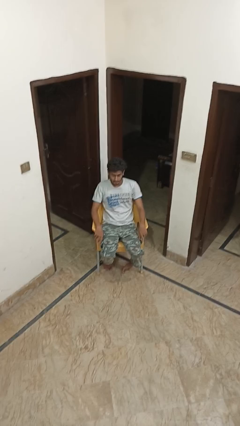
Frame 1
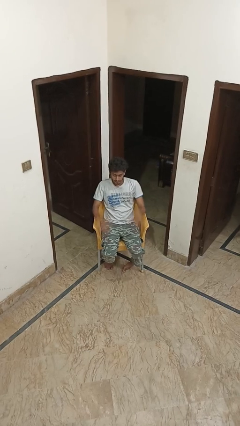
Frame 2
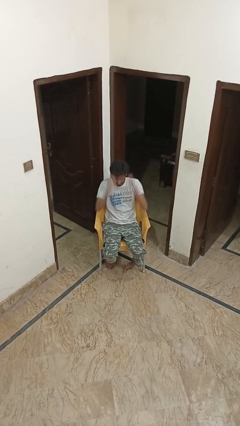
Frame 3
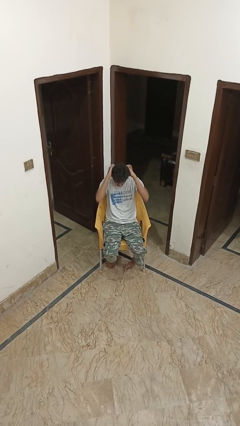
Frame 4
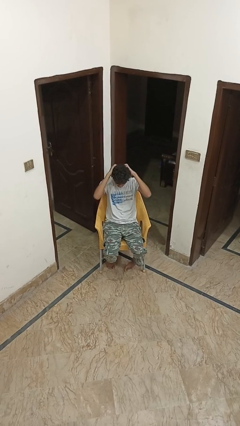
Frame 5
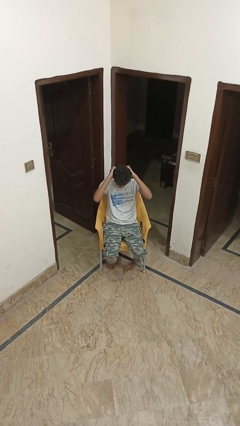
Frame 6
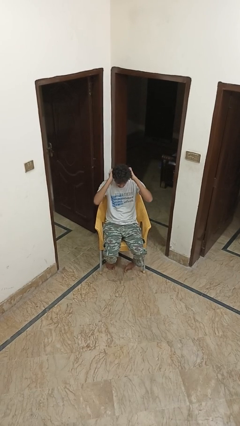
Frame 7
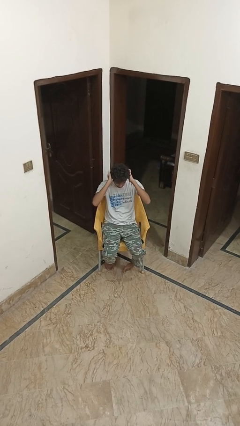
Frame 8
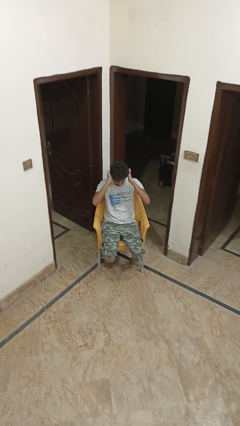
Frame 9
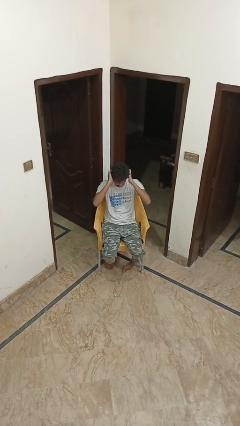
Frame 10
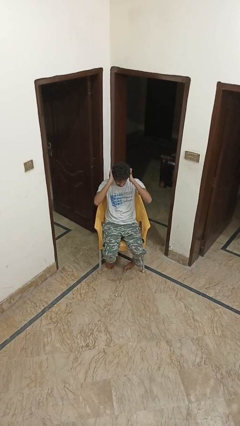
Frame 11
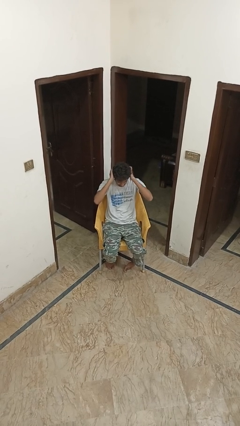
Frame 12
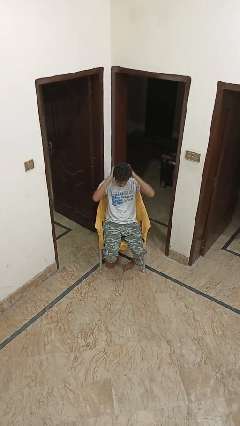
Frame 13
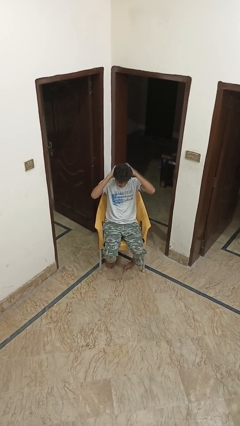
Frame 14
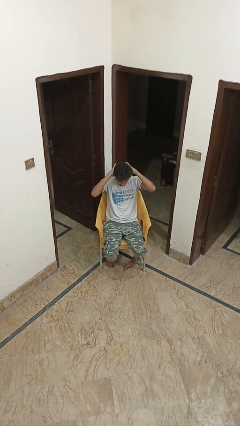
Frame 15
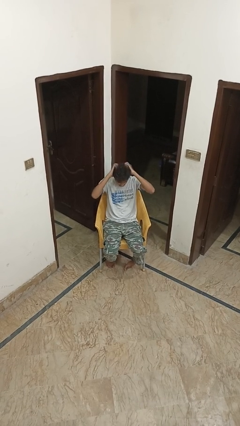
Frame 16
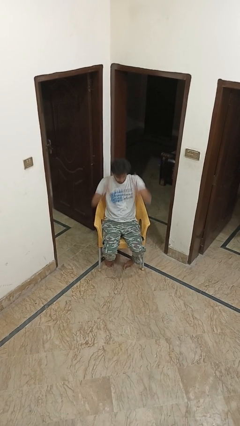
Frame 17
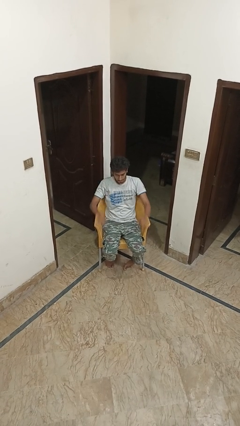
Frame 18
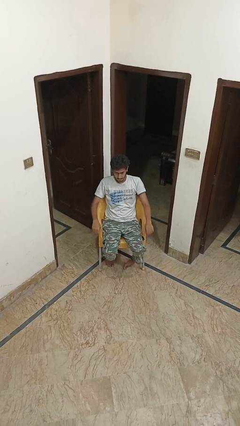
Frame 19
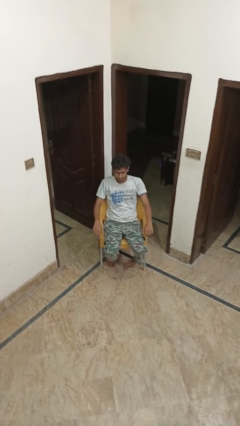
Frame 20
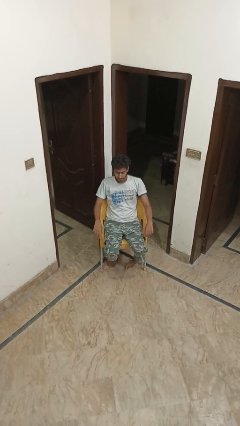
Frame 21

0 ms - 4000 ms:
person scratches face

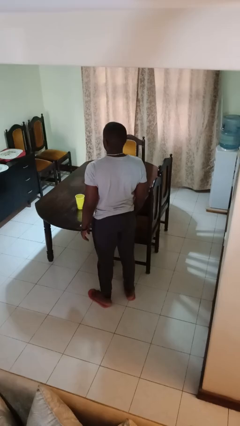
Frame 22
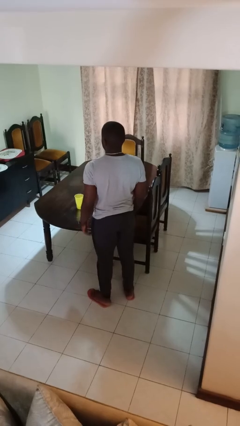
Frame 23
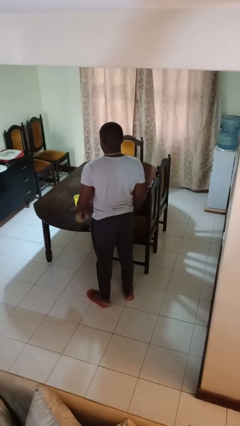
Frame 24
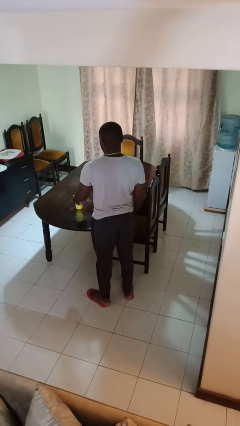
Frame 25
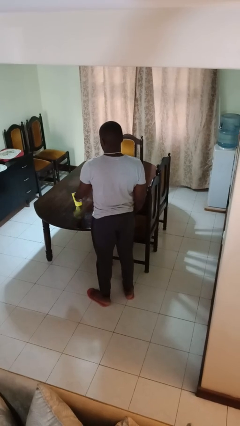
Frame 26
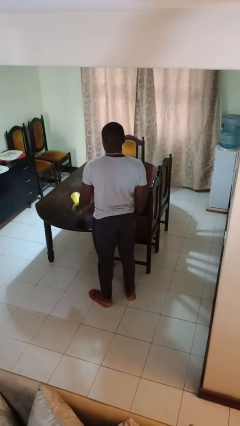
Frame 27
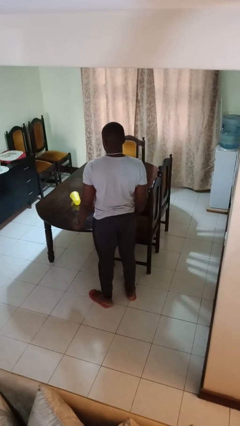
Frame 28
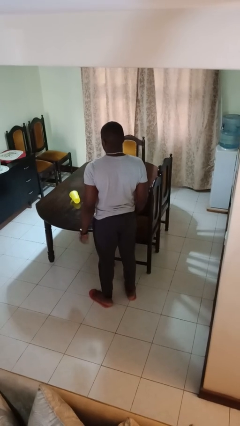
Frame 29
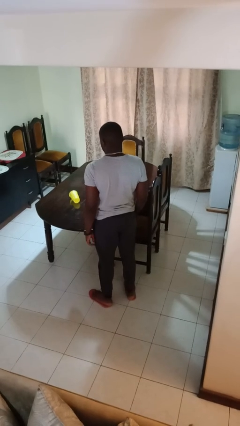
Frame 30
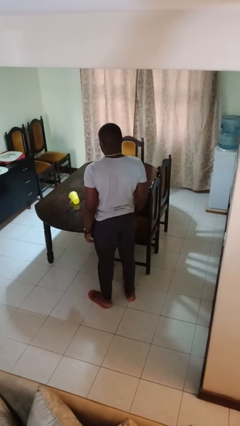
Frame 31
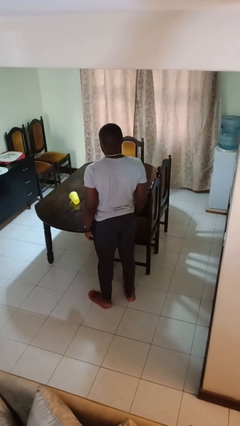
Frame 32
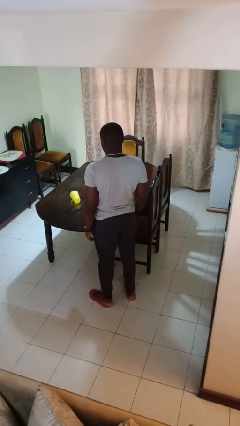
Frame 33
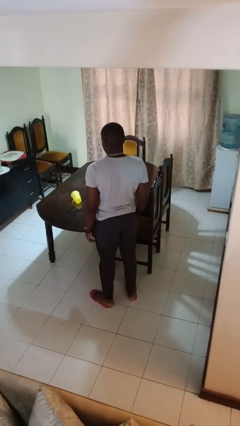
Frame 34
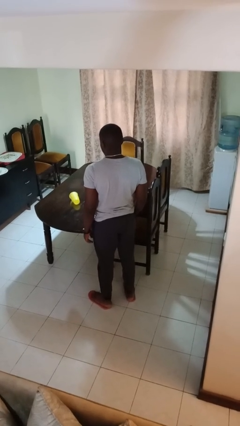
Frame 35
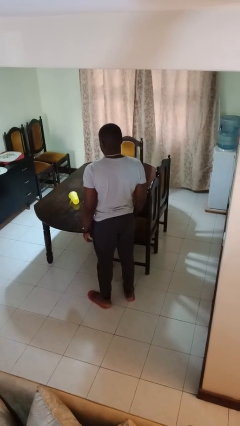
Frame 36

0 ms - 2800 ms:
person knocks over glass

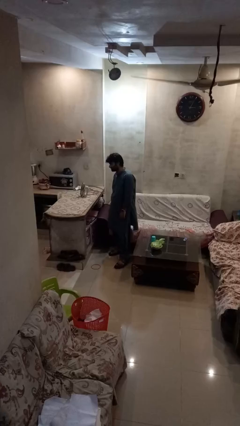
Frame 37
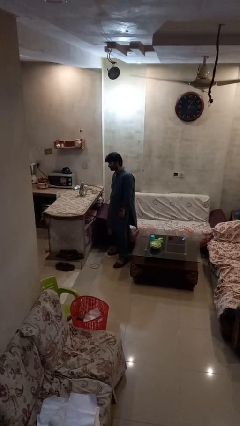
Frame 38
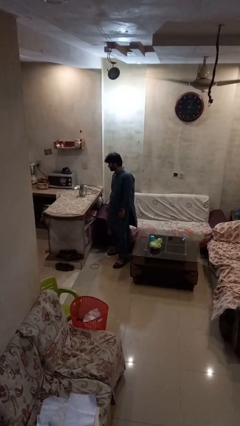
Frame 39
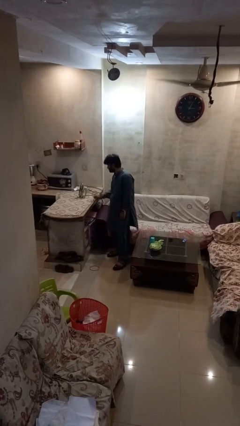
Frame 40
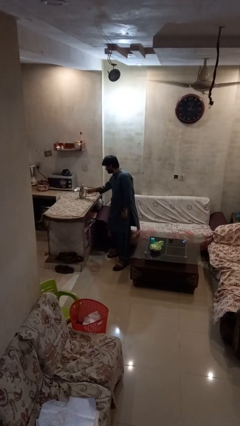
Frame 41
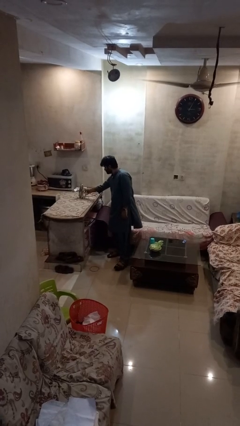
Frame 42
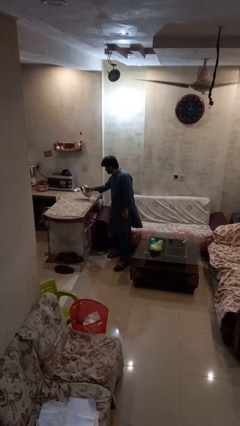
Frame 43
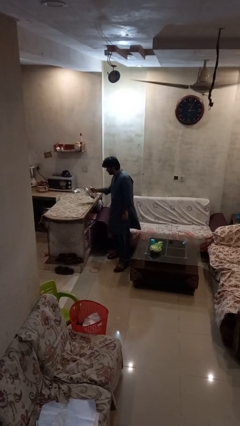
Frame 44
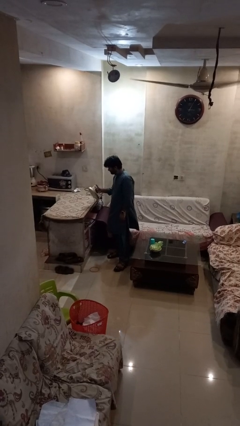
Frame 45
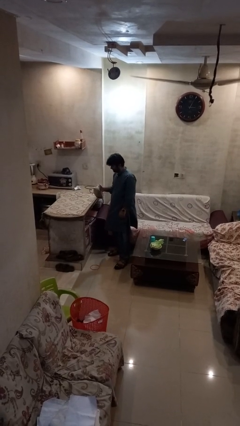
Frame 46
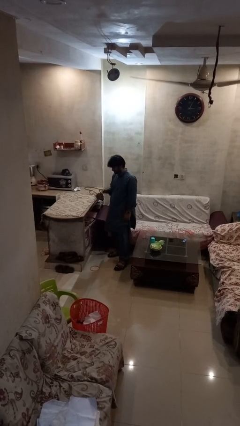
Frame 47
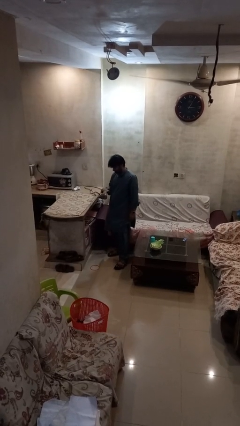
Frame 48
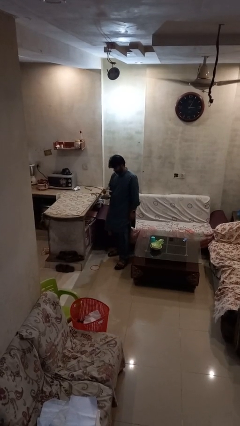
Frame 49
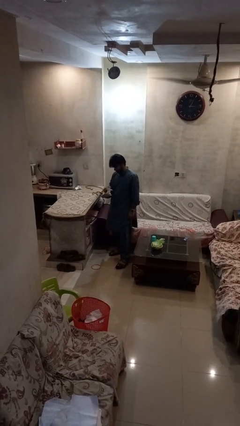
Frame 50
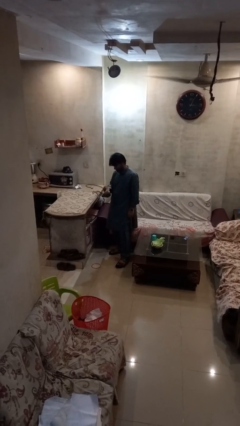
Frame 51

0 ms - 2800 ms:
person picks up object from countertop

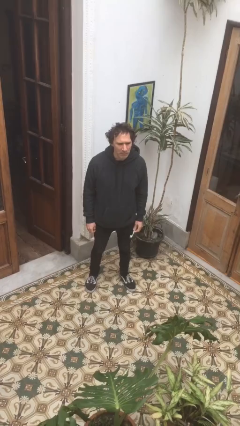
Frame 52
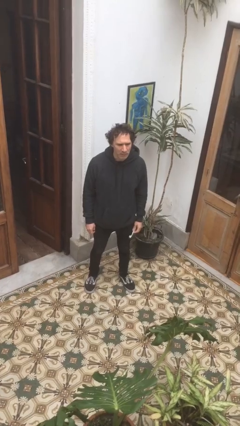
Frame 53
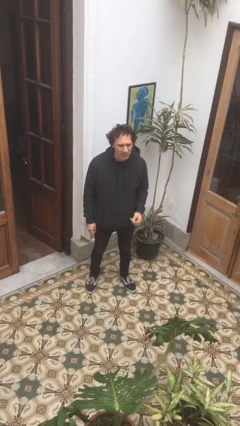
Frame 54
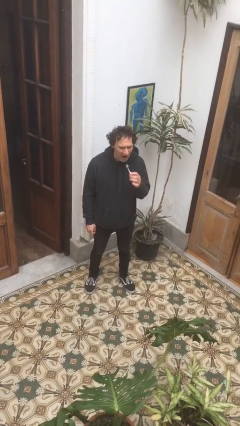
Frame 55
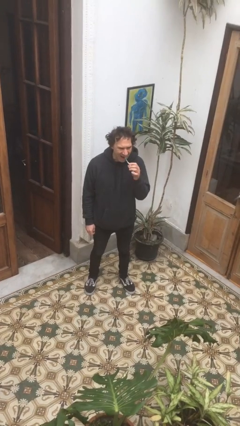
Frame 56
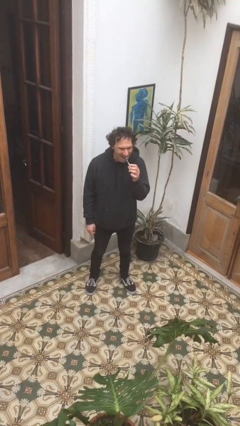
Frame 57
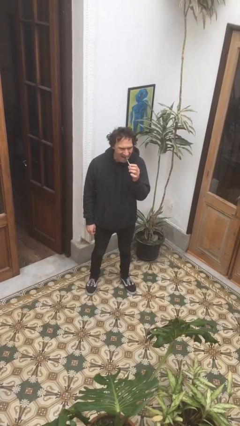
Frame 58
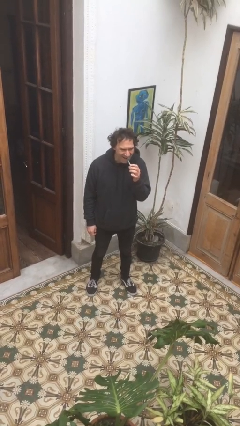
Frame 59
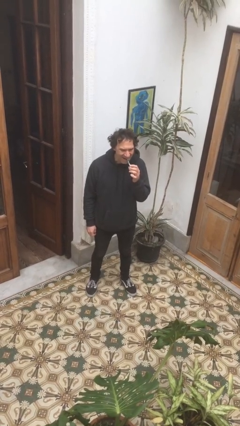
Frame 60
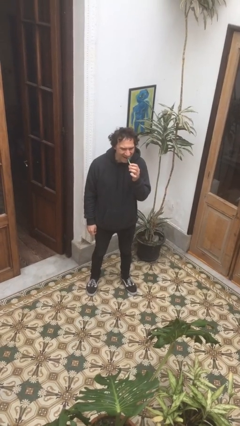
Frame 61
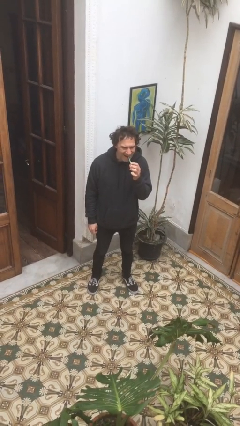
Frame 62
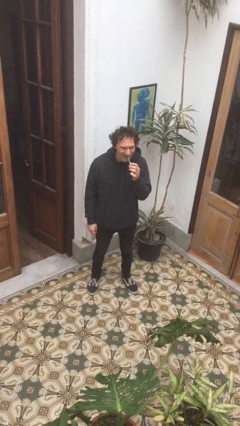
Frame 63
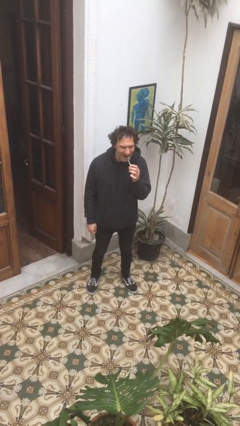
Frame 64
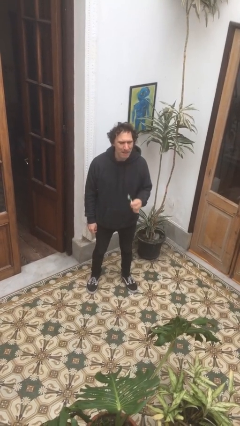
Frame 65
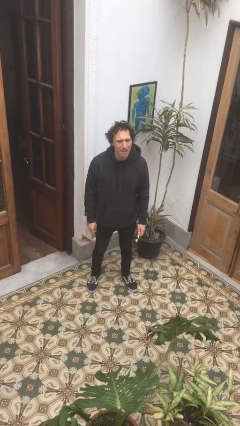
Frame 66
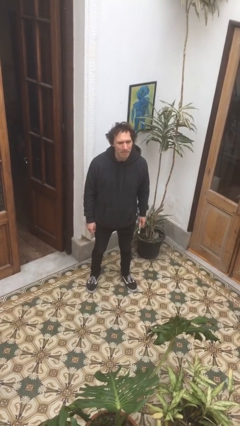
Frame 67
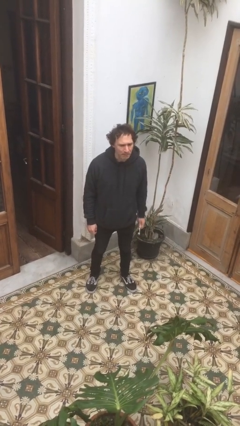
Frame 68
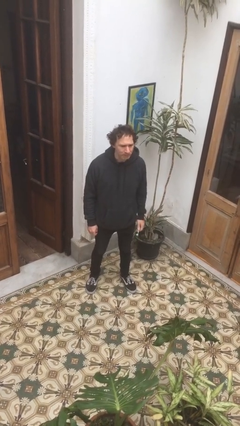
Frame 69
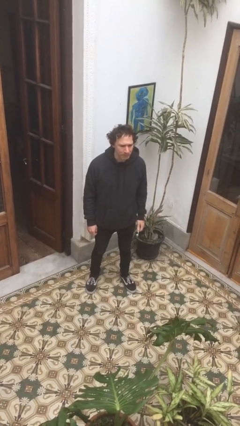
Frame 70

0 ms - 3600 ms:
person brushes teeth

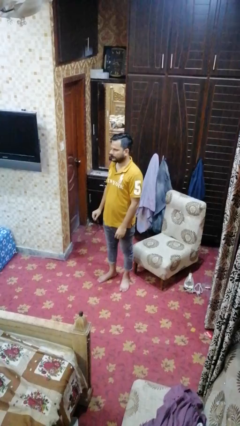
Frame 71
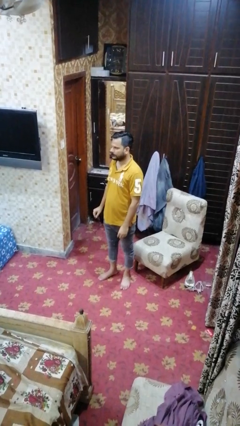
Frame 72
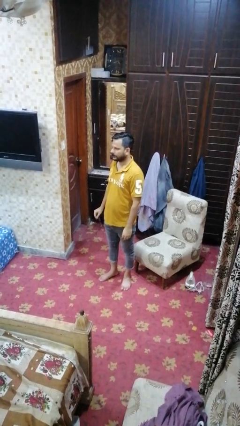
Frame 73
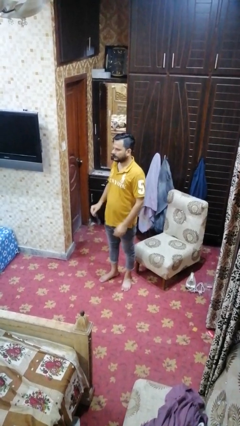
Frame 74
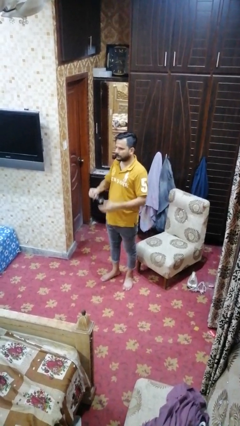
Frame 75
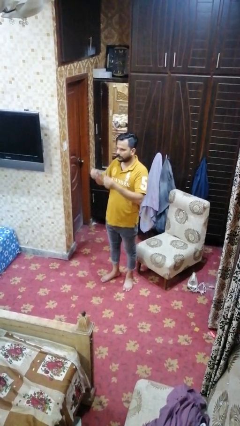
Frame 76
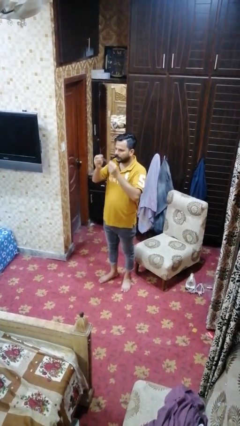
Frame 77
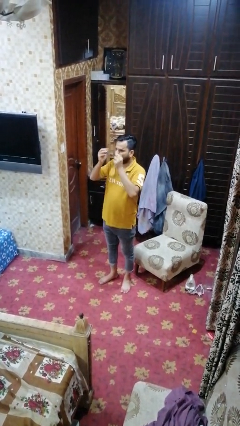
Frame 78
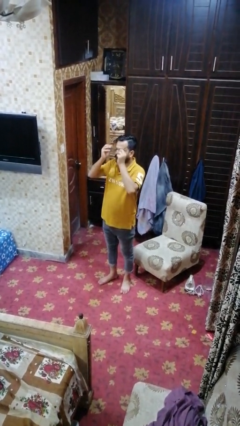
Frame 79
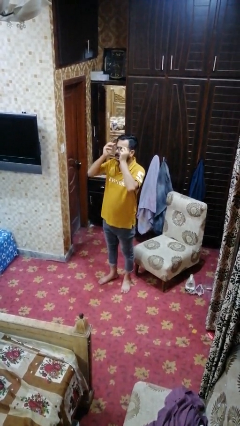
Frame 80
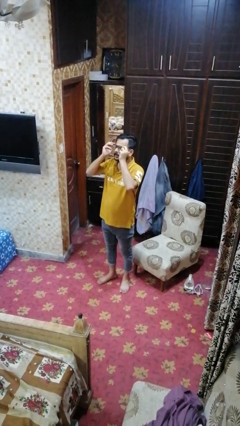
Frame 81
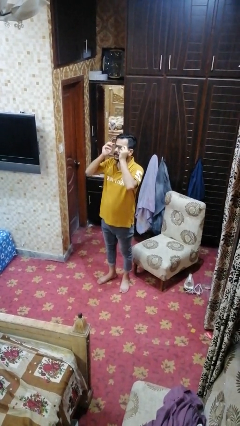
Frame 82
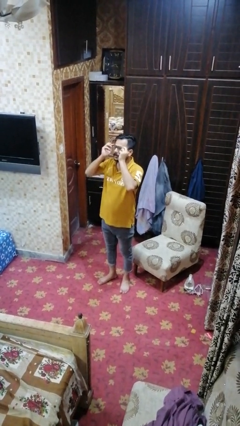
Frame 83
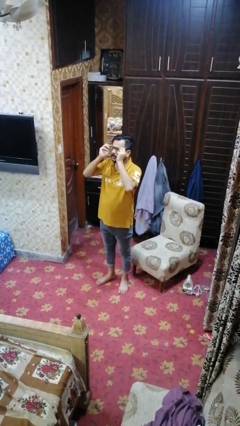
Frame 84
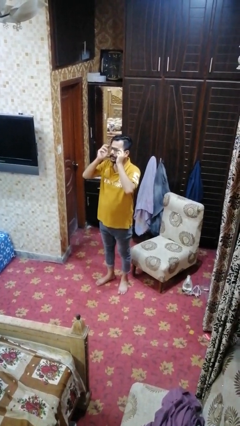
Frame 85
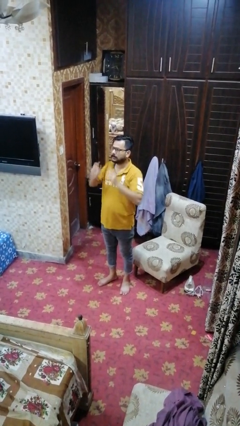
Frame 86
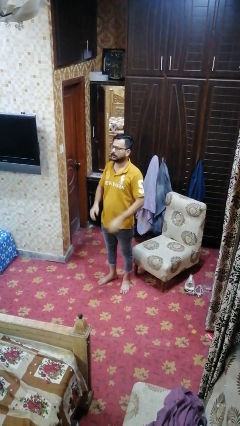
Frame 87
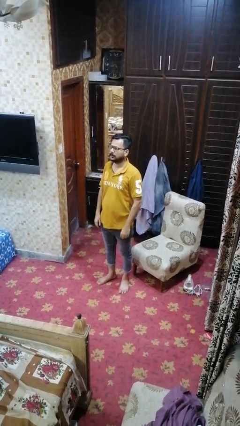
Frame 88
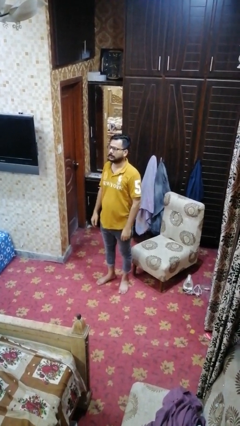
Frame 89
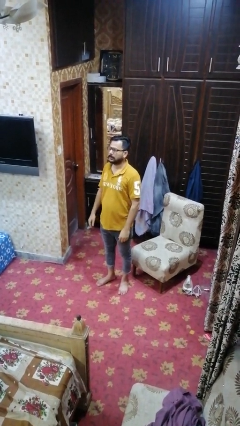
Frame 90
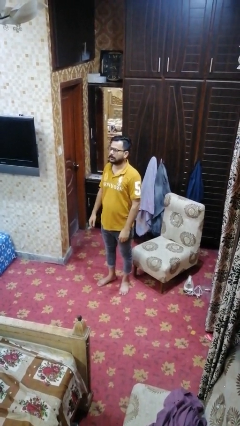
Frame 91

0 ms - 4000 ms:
person puts on glasses

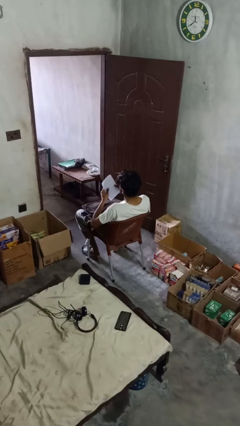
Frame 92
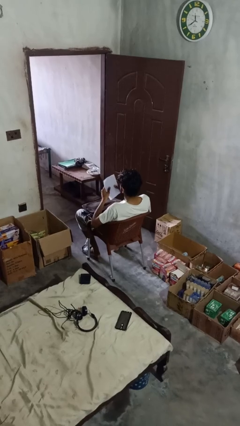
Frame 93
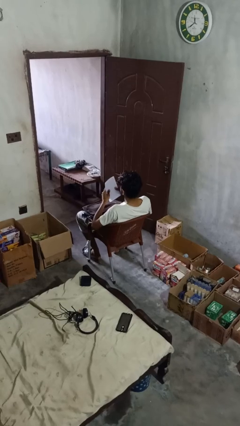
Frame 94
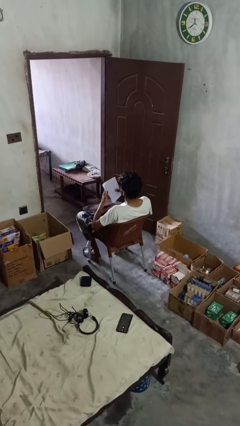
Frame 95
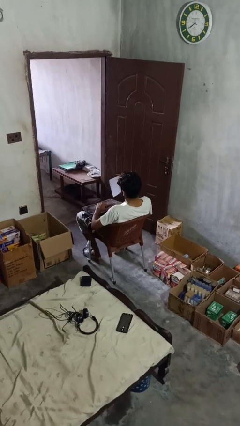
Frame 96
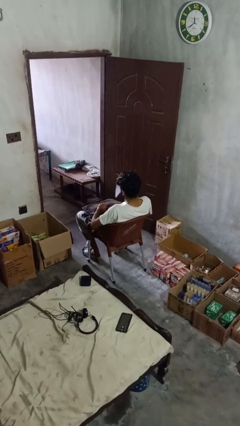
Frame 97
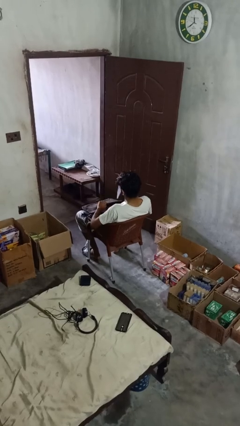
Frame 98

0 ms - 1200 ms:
person takes object from backpack
